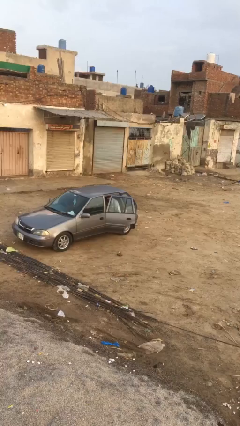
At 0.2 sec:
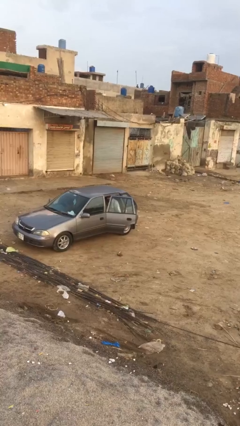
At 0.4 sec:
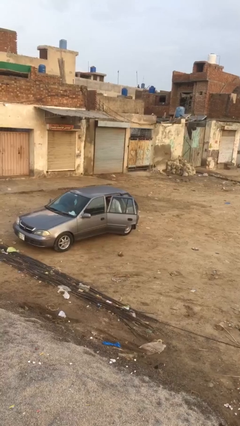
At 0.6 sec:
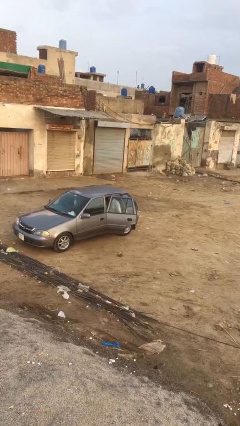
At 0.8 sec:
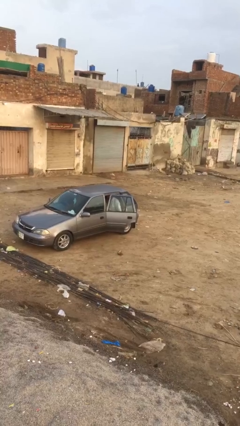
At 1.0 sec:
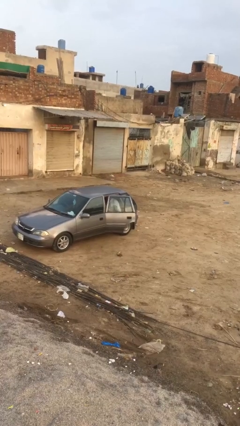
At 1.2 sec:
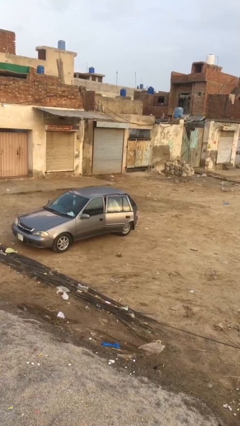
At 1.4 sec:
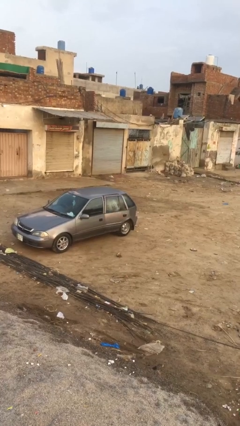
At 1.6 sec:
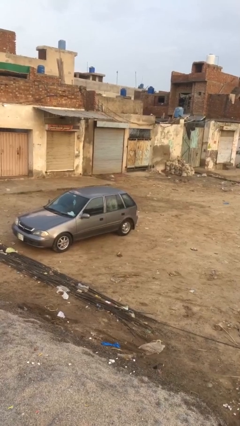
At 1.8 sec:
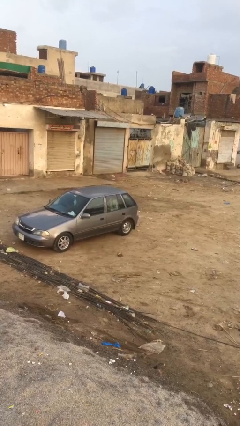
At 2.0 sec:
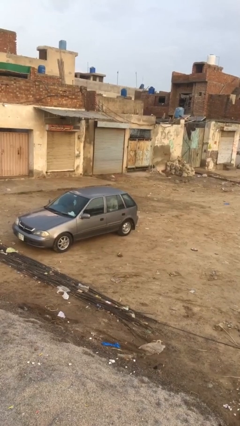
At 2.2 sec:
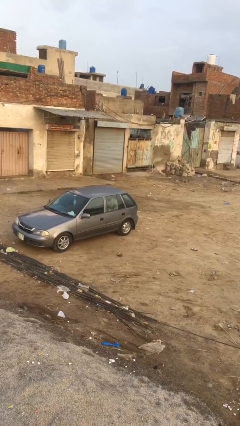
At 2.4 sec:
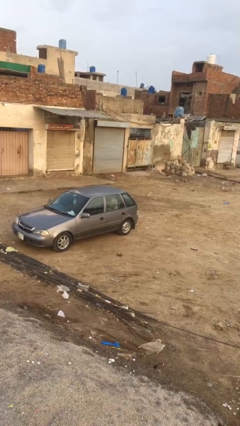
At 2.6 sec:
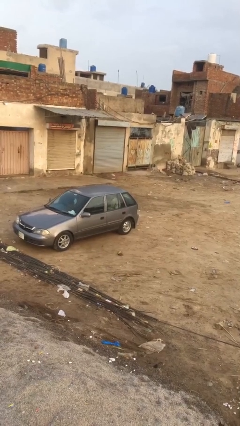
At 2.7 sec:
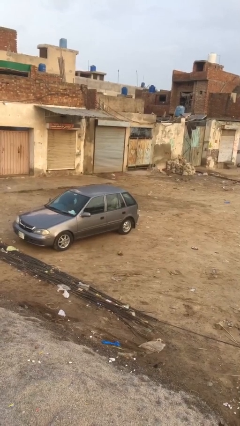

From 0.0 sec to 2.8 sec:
person closes car door

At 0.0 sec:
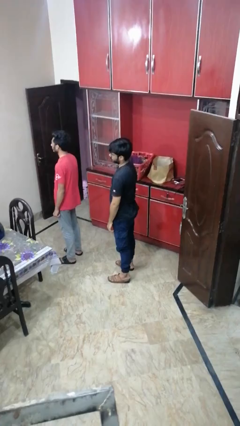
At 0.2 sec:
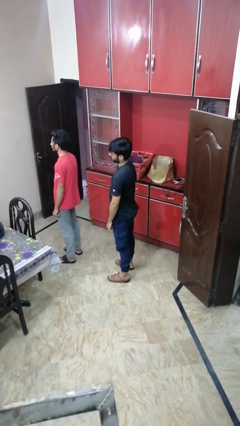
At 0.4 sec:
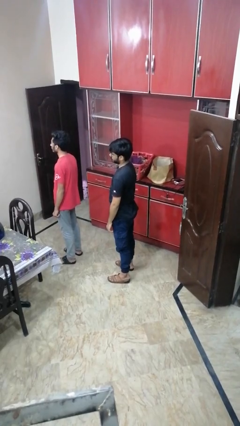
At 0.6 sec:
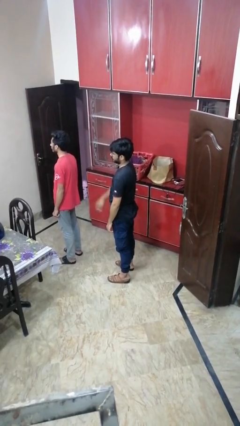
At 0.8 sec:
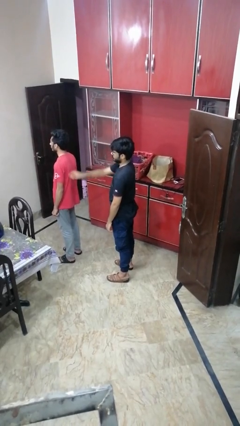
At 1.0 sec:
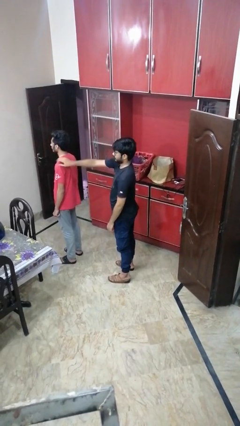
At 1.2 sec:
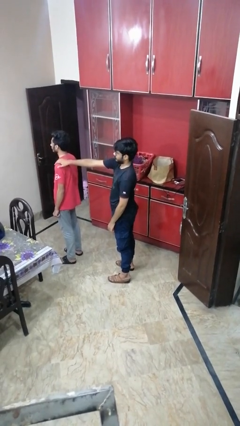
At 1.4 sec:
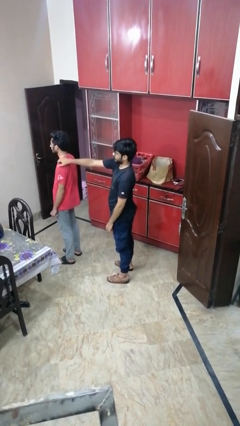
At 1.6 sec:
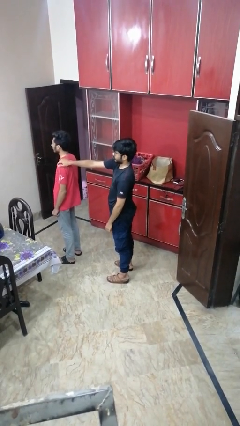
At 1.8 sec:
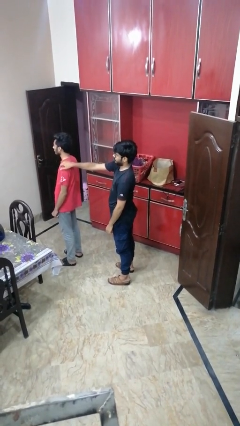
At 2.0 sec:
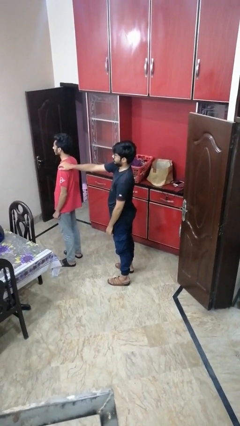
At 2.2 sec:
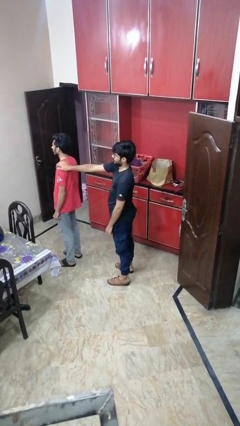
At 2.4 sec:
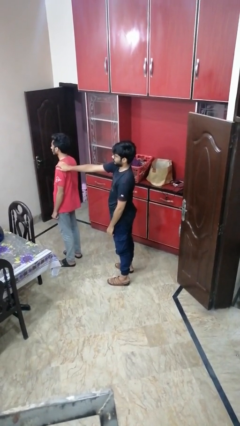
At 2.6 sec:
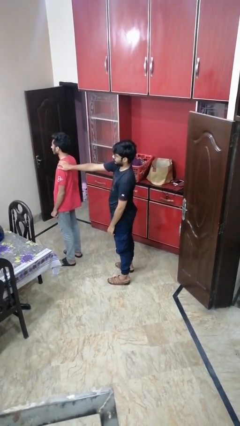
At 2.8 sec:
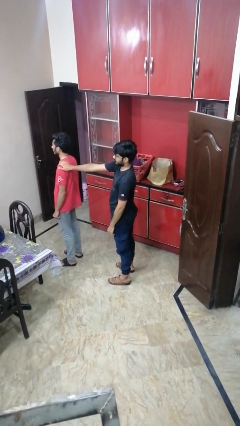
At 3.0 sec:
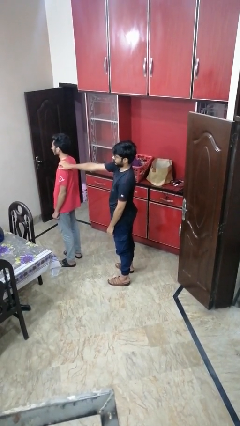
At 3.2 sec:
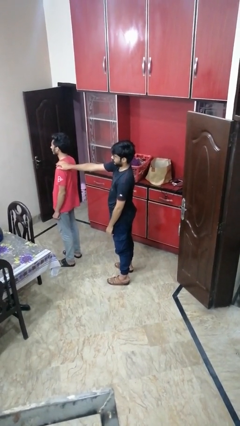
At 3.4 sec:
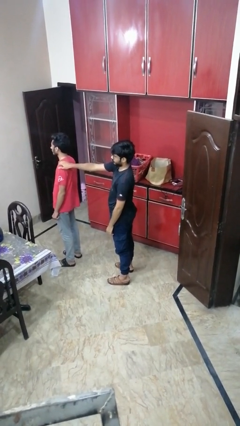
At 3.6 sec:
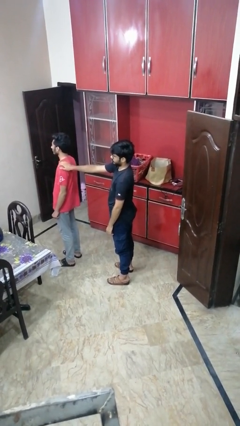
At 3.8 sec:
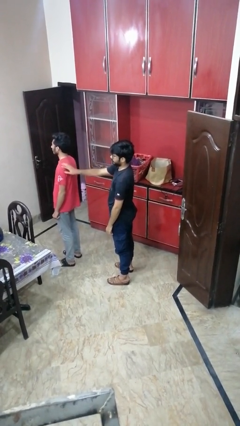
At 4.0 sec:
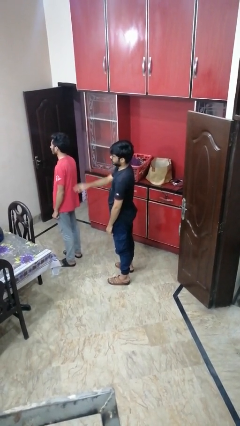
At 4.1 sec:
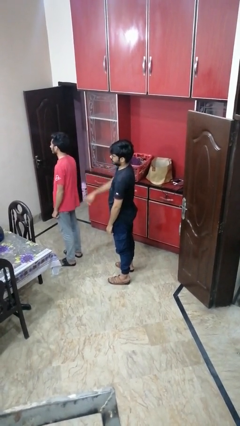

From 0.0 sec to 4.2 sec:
person touches back of person

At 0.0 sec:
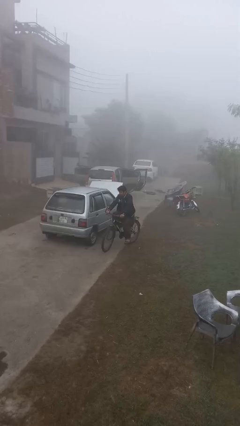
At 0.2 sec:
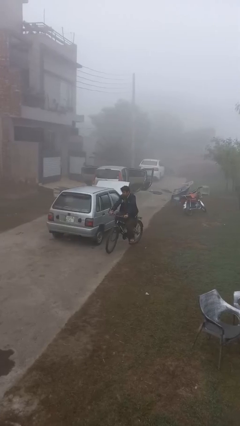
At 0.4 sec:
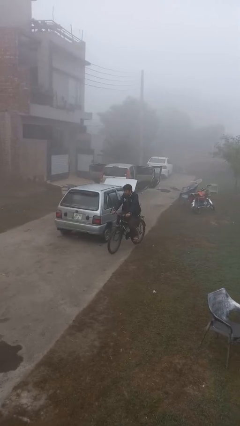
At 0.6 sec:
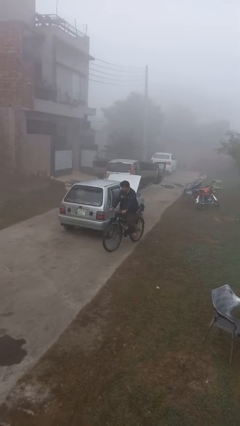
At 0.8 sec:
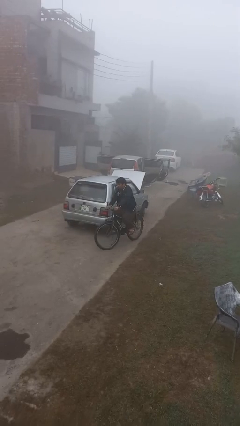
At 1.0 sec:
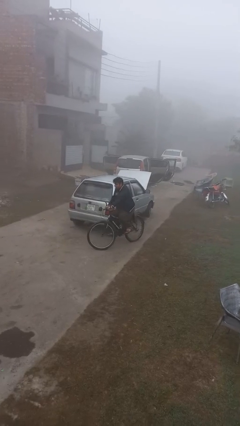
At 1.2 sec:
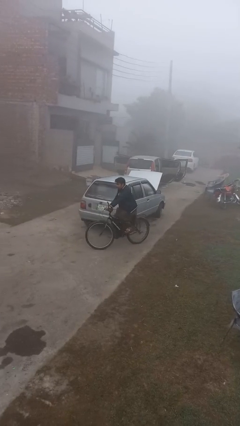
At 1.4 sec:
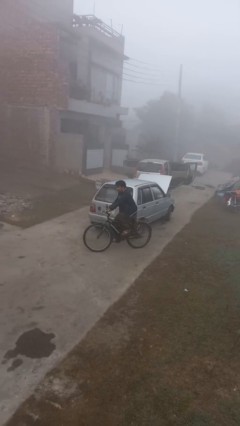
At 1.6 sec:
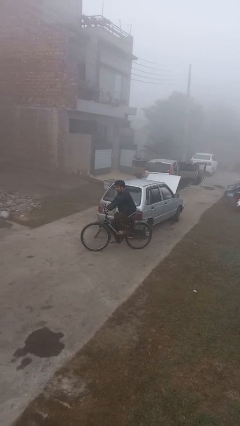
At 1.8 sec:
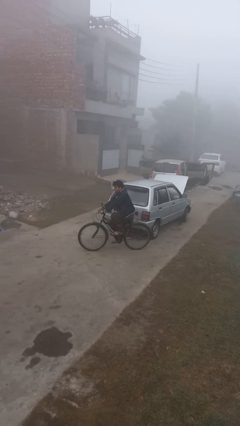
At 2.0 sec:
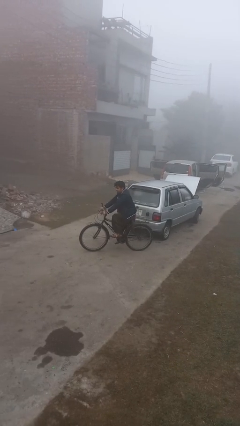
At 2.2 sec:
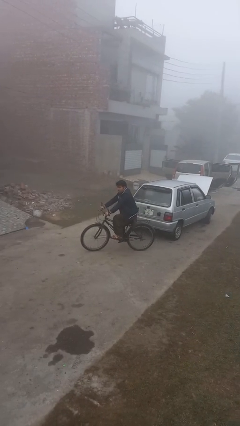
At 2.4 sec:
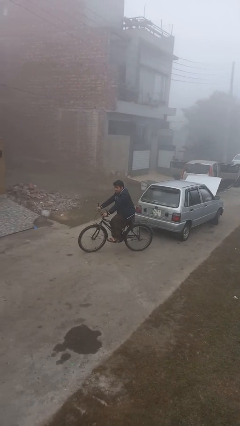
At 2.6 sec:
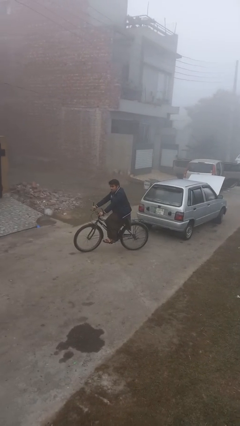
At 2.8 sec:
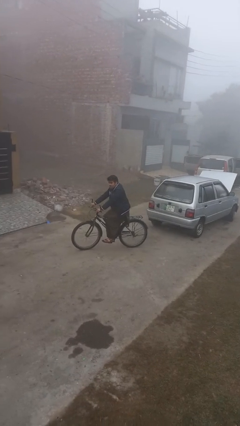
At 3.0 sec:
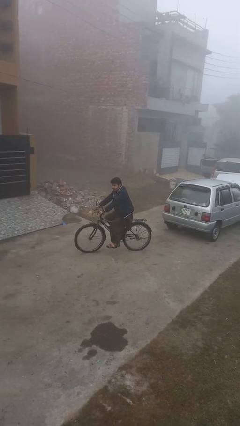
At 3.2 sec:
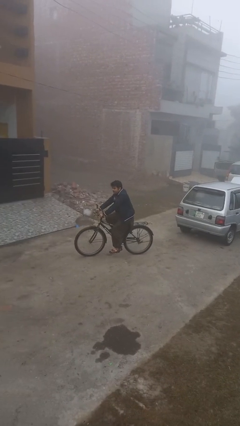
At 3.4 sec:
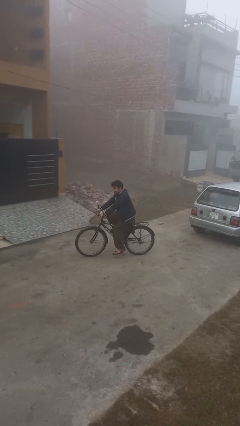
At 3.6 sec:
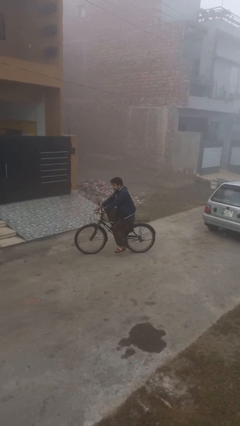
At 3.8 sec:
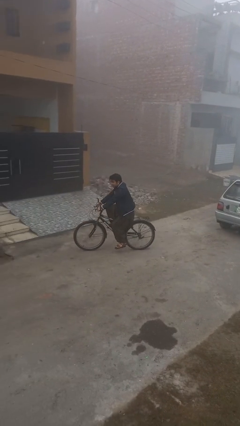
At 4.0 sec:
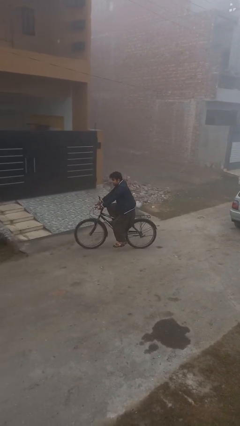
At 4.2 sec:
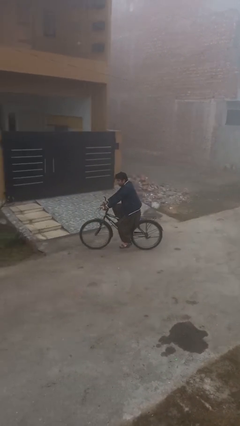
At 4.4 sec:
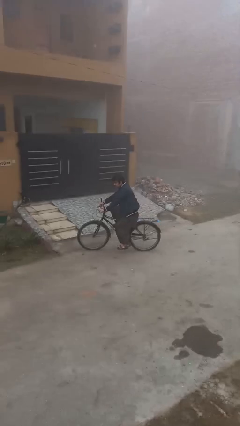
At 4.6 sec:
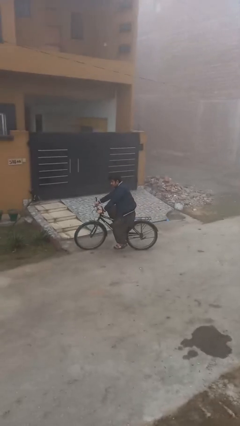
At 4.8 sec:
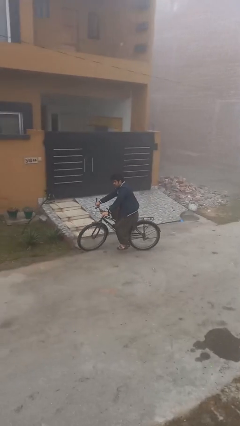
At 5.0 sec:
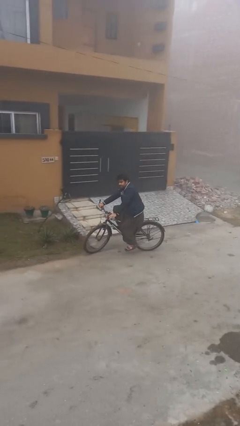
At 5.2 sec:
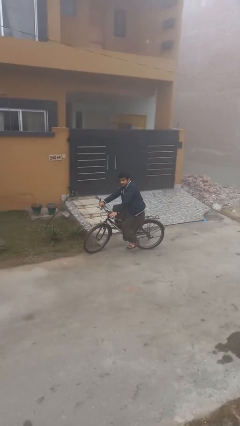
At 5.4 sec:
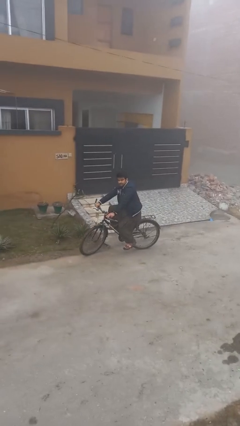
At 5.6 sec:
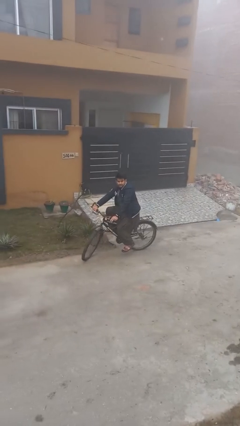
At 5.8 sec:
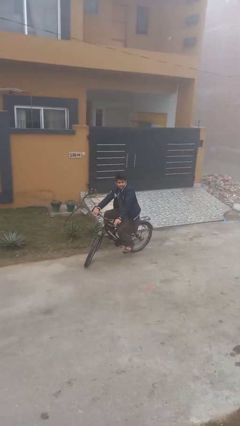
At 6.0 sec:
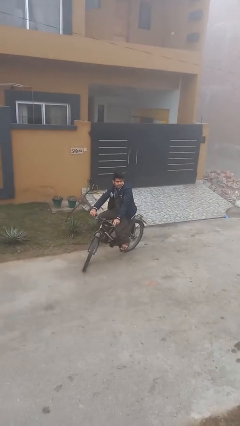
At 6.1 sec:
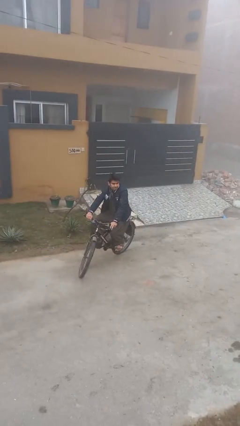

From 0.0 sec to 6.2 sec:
person rides bicycle

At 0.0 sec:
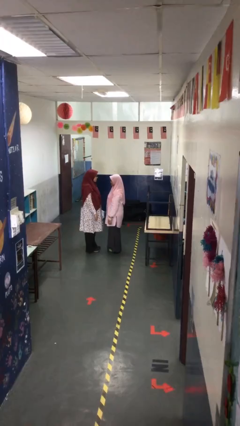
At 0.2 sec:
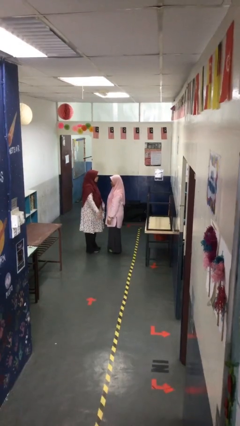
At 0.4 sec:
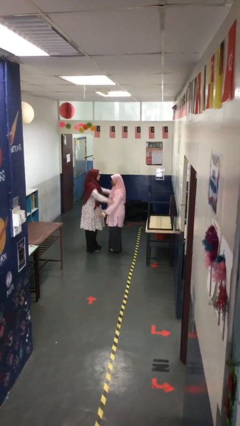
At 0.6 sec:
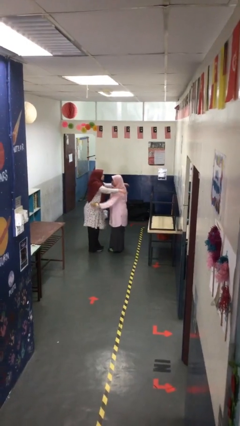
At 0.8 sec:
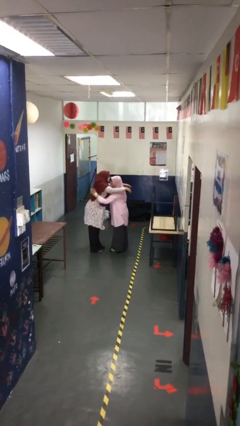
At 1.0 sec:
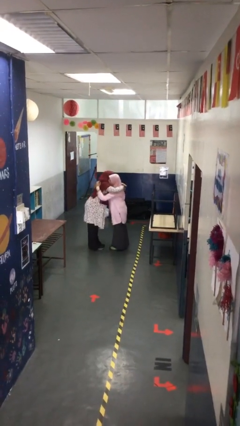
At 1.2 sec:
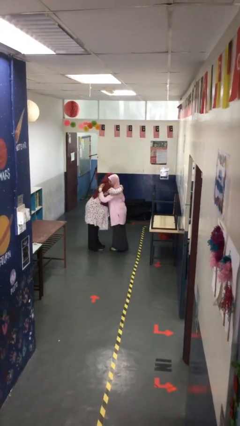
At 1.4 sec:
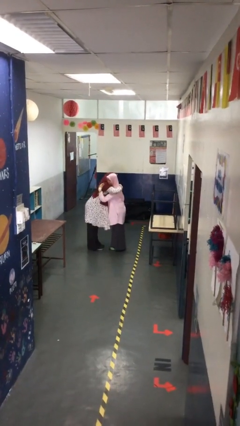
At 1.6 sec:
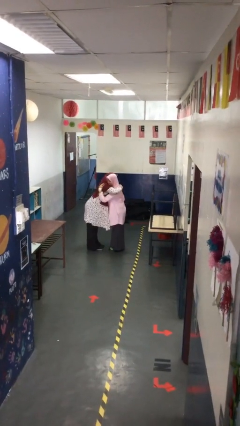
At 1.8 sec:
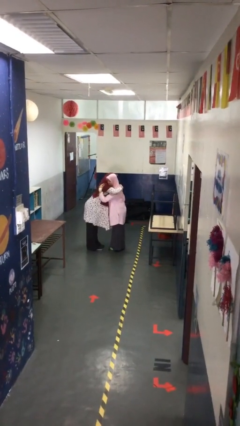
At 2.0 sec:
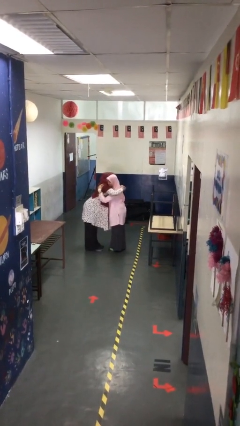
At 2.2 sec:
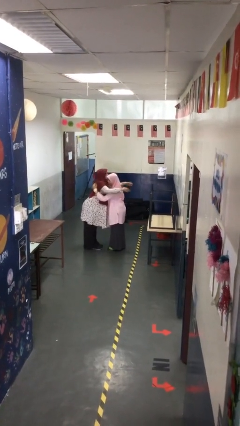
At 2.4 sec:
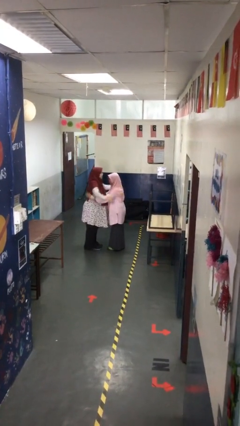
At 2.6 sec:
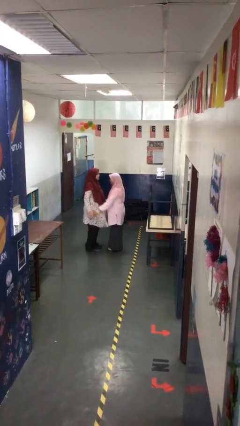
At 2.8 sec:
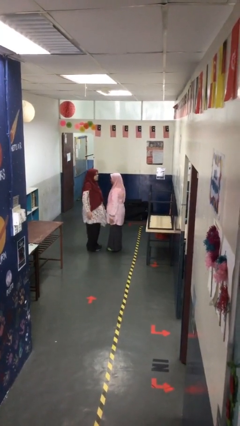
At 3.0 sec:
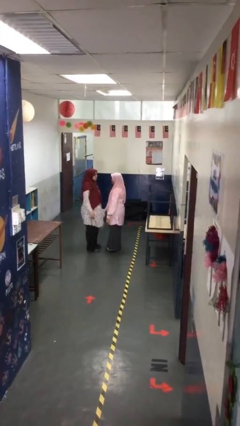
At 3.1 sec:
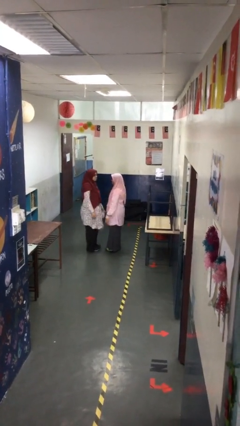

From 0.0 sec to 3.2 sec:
person embraces person

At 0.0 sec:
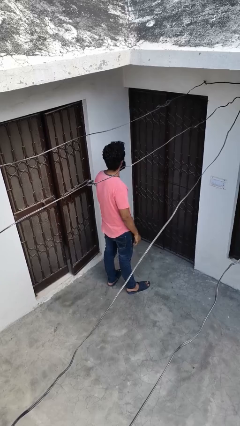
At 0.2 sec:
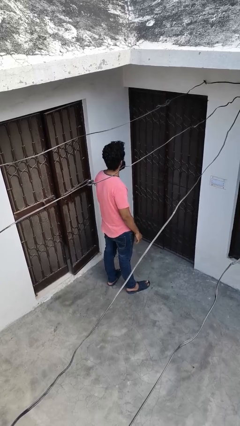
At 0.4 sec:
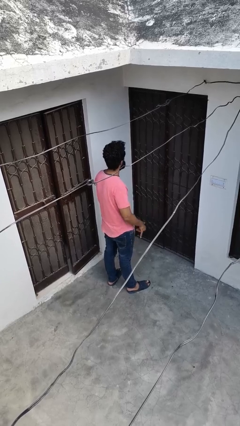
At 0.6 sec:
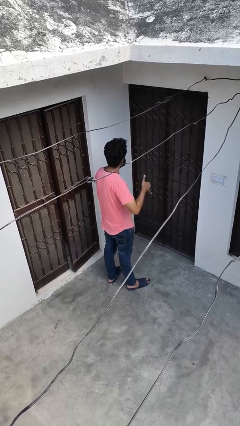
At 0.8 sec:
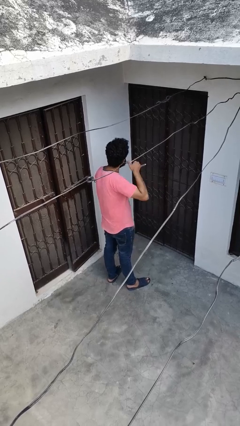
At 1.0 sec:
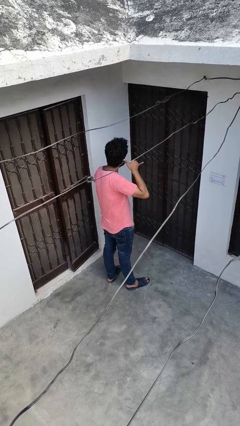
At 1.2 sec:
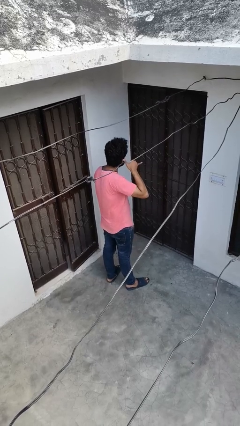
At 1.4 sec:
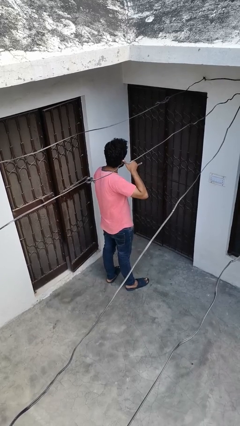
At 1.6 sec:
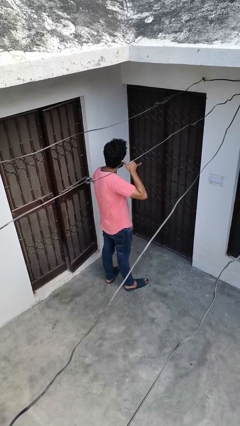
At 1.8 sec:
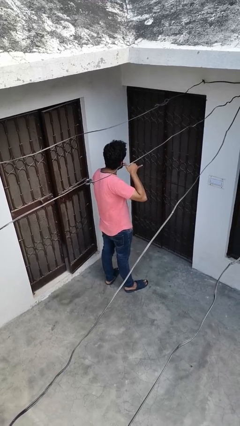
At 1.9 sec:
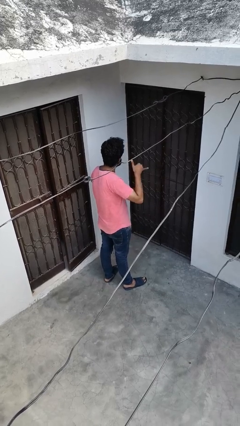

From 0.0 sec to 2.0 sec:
person gestures call me
